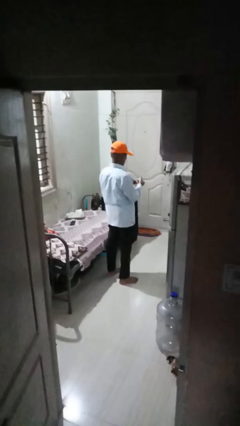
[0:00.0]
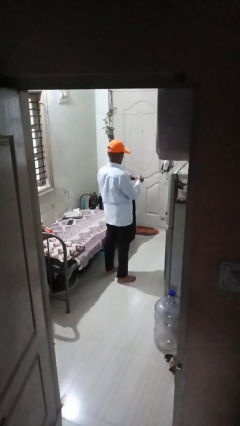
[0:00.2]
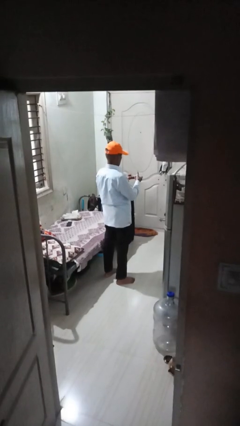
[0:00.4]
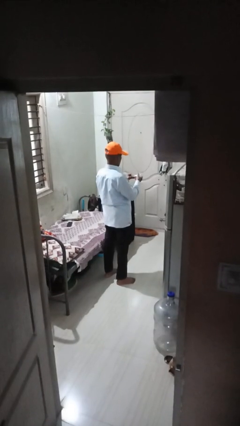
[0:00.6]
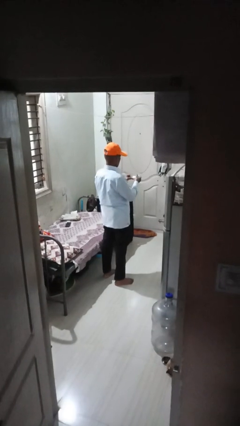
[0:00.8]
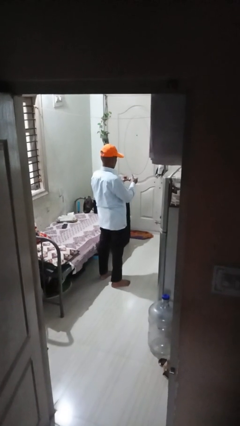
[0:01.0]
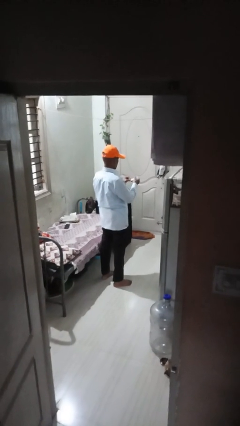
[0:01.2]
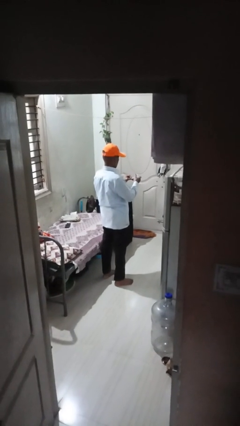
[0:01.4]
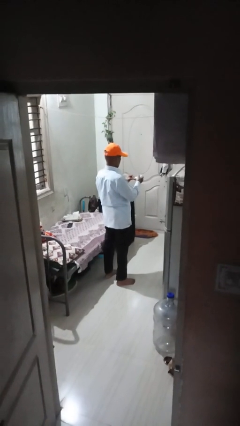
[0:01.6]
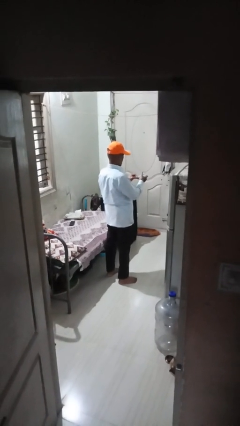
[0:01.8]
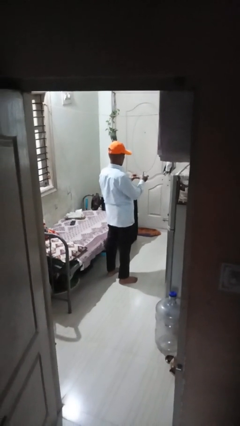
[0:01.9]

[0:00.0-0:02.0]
person clips fingernails

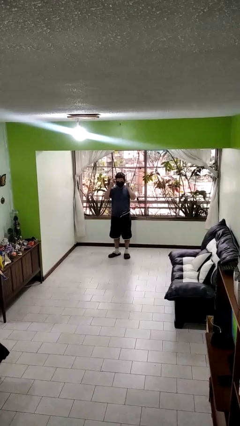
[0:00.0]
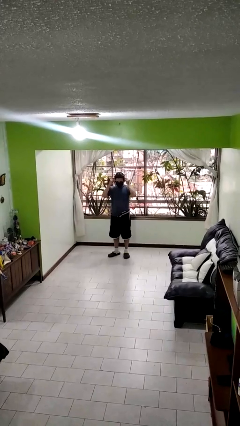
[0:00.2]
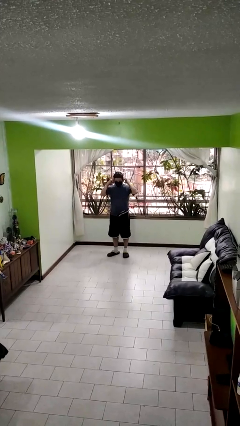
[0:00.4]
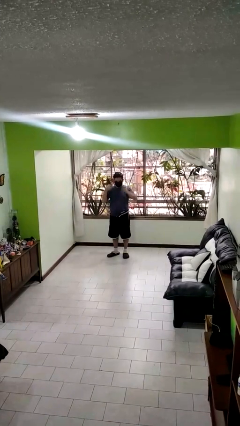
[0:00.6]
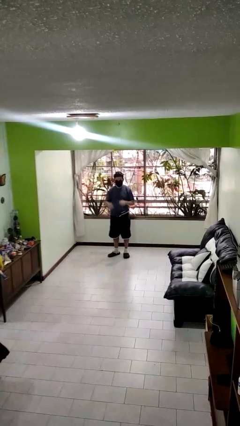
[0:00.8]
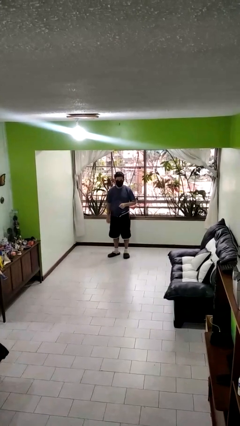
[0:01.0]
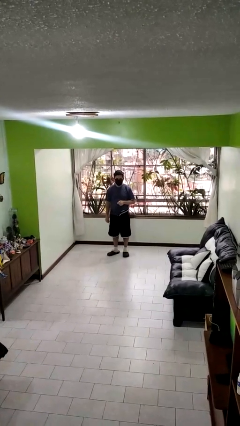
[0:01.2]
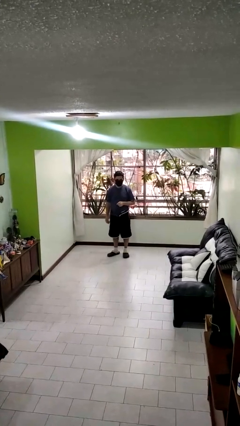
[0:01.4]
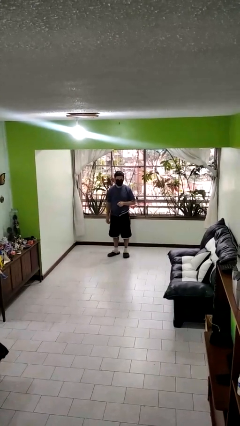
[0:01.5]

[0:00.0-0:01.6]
person puts on facemask

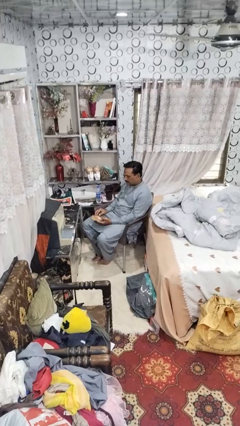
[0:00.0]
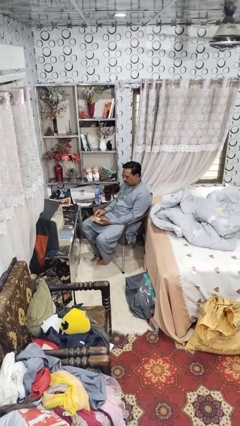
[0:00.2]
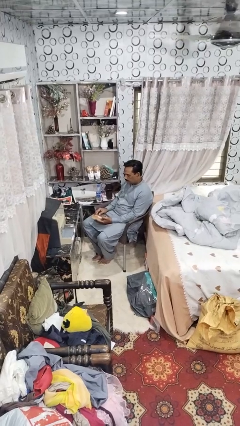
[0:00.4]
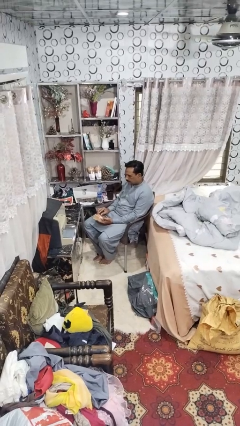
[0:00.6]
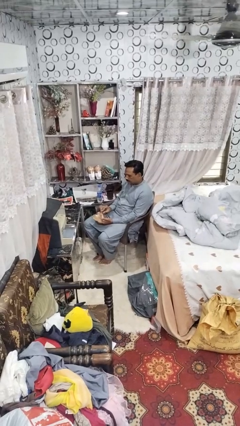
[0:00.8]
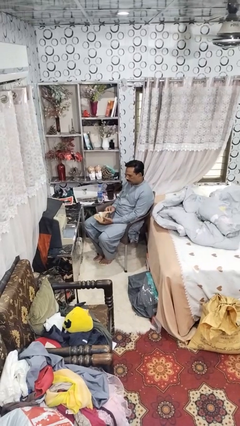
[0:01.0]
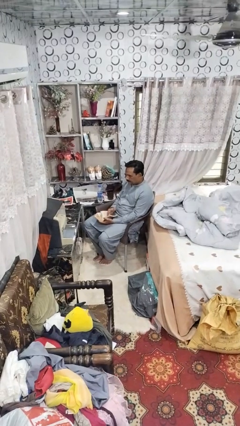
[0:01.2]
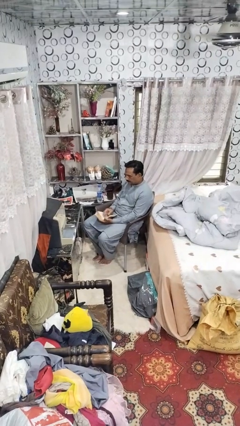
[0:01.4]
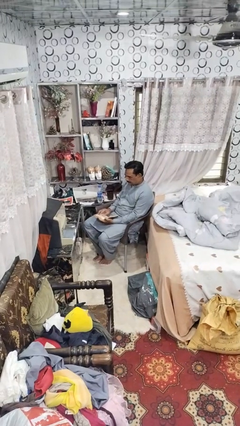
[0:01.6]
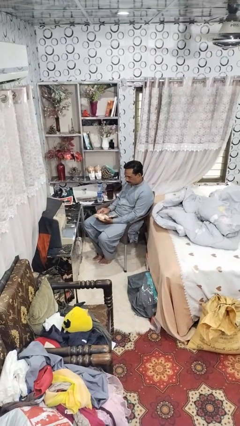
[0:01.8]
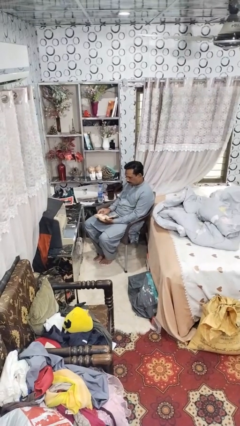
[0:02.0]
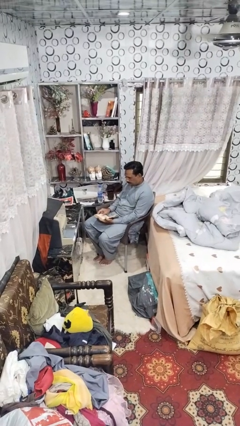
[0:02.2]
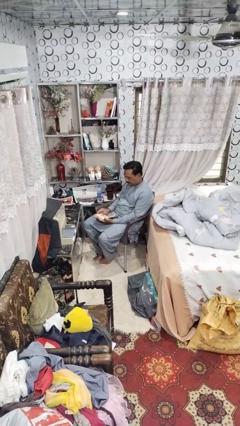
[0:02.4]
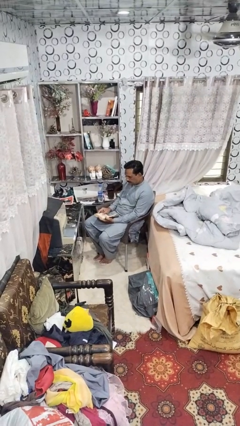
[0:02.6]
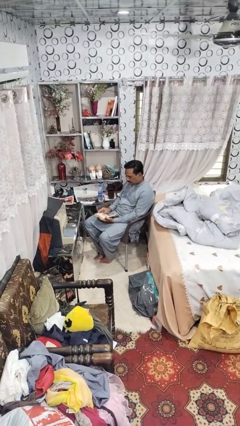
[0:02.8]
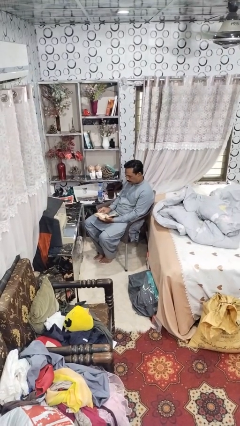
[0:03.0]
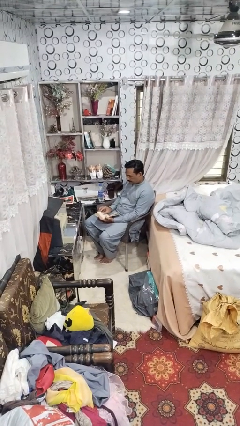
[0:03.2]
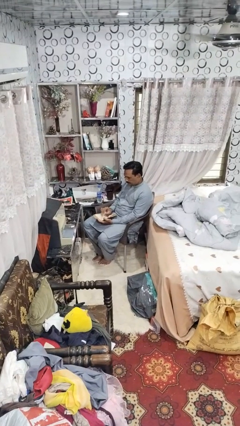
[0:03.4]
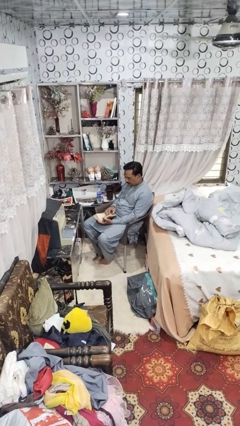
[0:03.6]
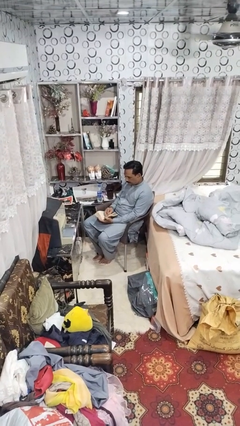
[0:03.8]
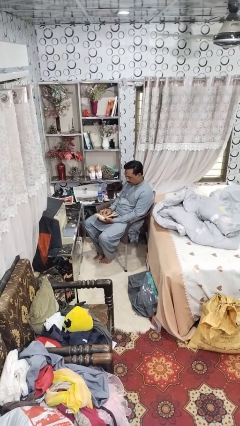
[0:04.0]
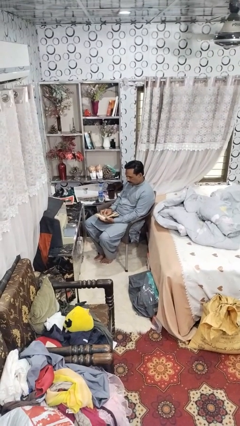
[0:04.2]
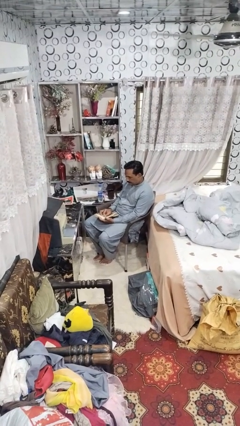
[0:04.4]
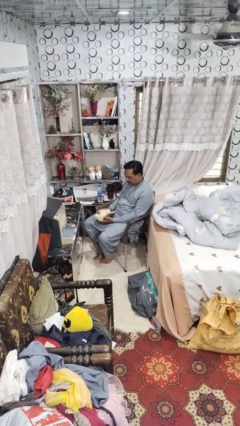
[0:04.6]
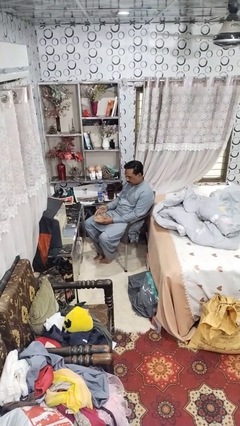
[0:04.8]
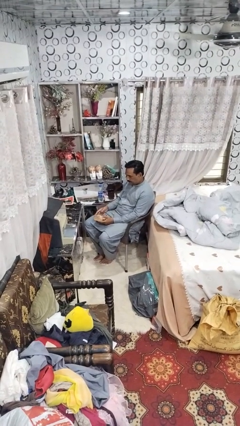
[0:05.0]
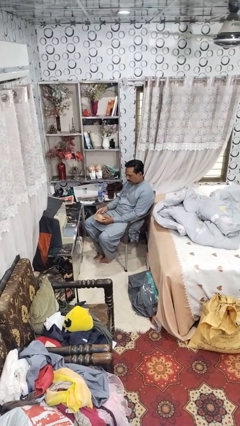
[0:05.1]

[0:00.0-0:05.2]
person reads book

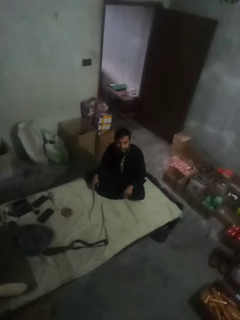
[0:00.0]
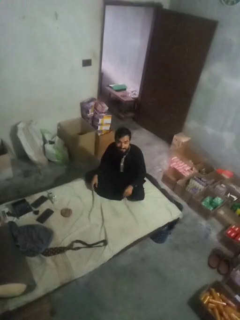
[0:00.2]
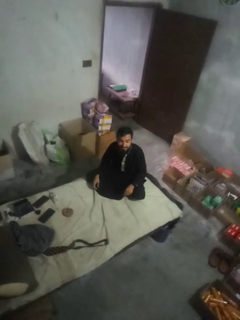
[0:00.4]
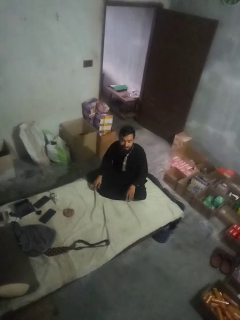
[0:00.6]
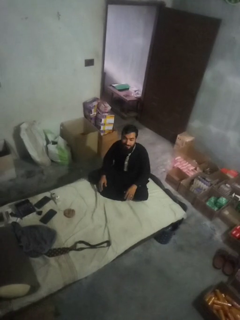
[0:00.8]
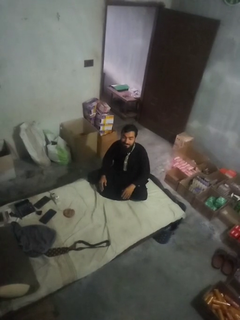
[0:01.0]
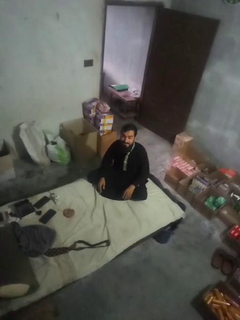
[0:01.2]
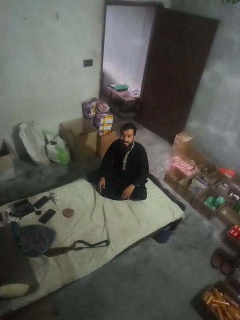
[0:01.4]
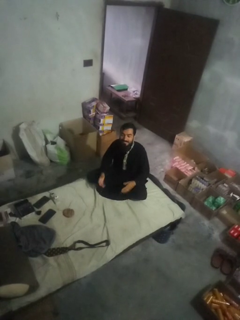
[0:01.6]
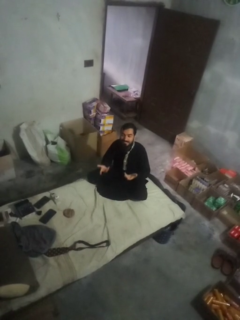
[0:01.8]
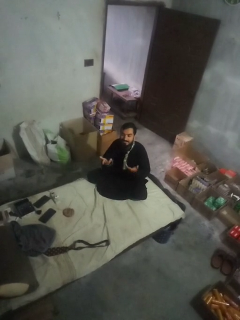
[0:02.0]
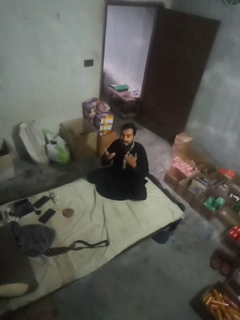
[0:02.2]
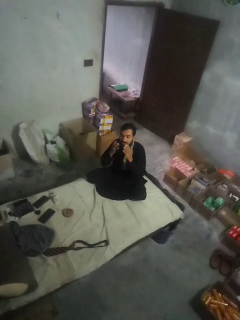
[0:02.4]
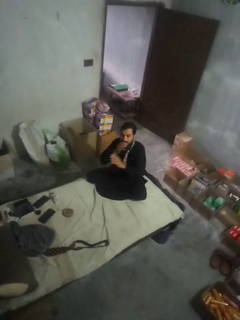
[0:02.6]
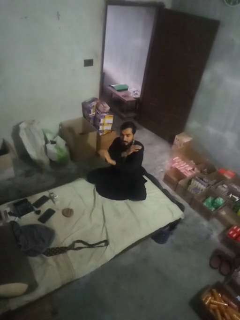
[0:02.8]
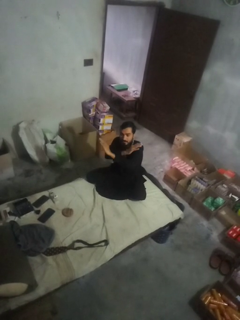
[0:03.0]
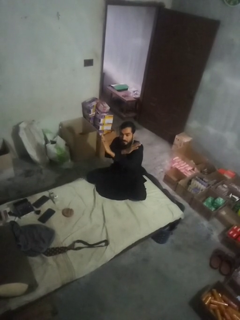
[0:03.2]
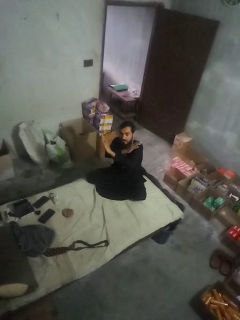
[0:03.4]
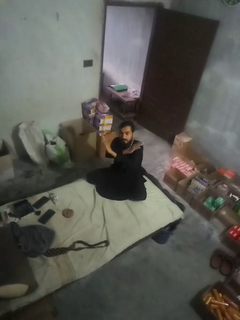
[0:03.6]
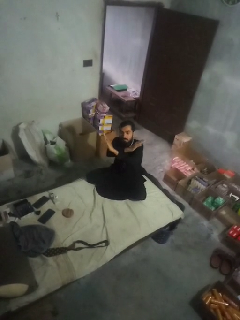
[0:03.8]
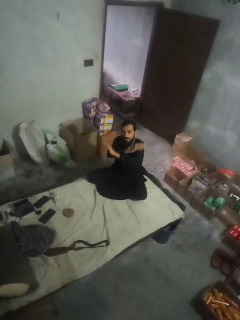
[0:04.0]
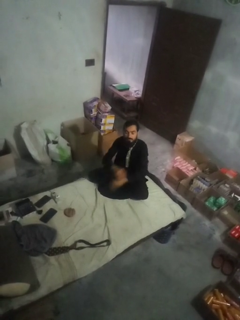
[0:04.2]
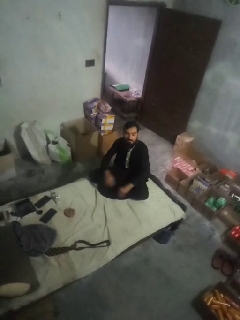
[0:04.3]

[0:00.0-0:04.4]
person gestures arms x

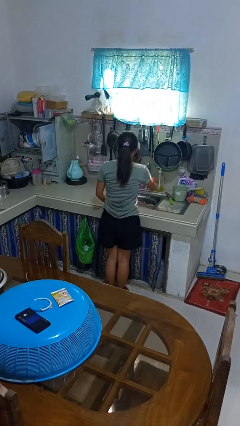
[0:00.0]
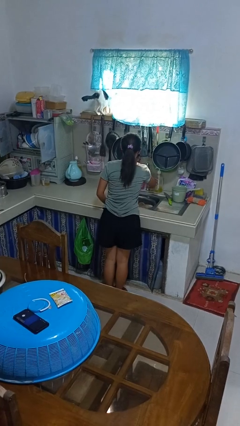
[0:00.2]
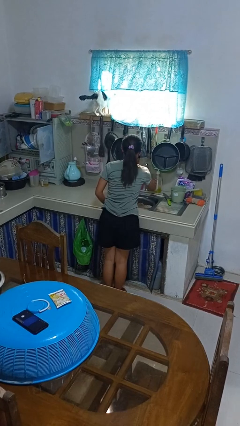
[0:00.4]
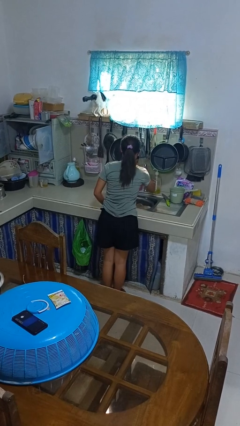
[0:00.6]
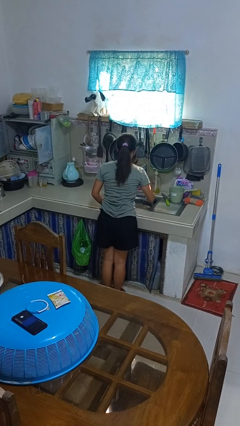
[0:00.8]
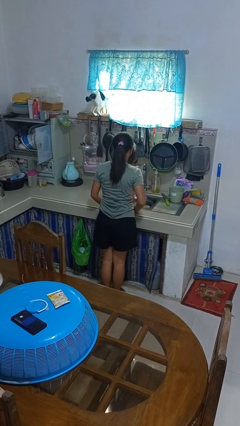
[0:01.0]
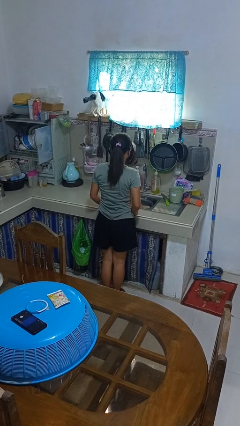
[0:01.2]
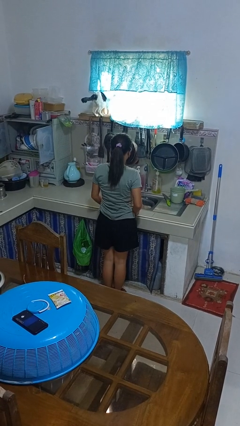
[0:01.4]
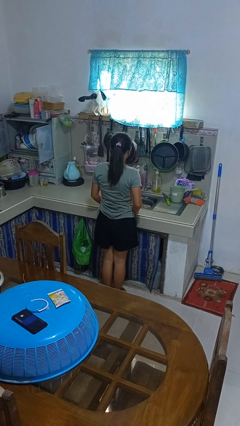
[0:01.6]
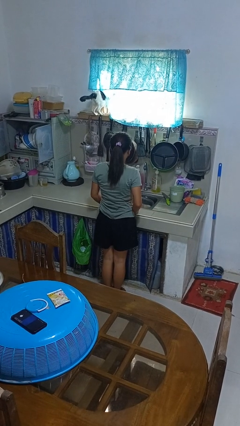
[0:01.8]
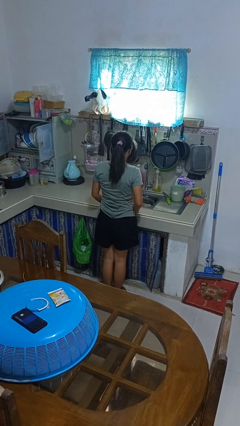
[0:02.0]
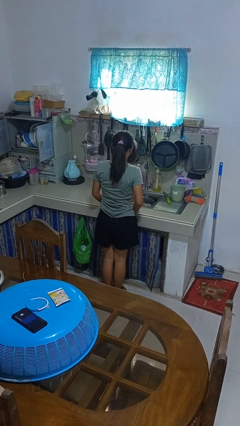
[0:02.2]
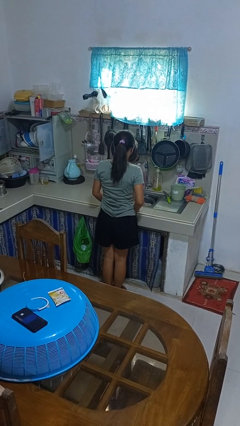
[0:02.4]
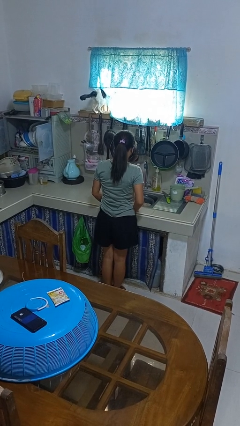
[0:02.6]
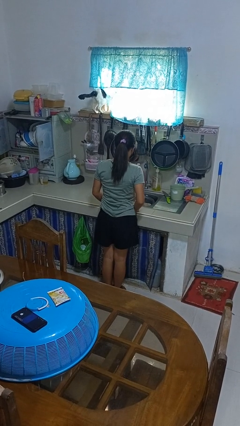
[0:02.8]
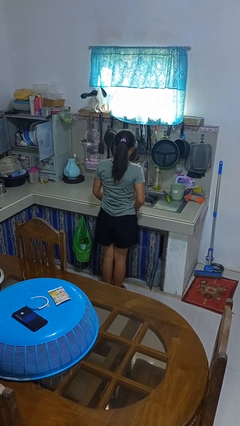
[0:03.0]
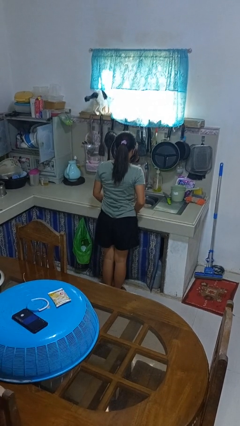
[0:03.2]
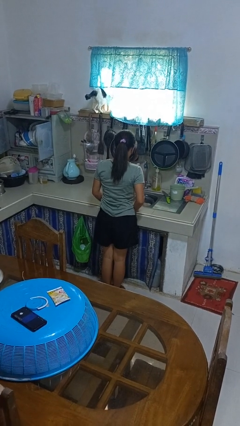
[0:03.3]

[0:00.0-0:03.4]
person turns on faucet

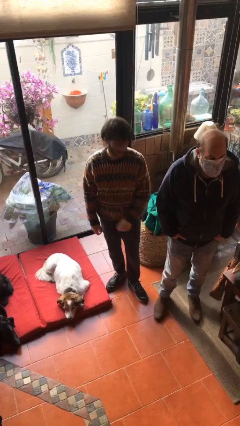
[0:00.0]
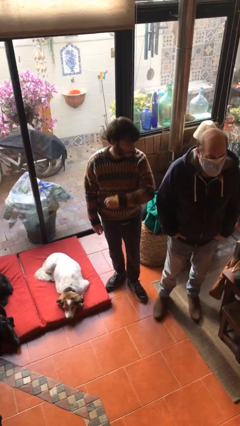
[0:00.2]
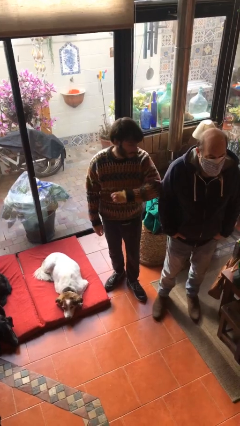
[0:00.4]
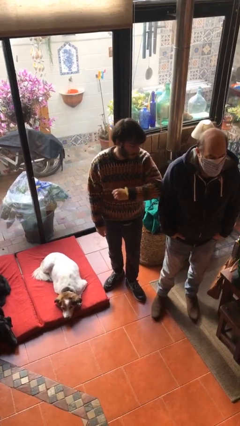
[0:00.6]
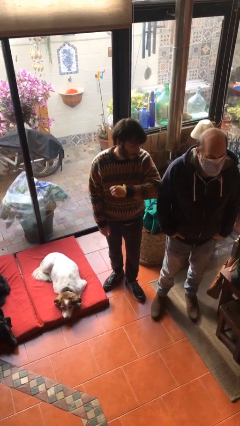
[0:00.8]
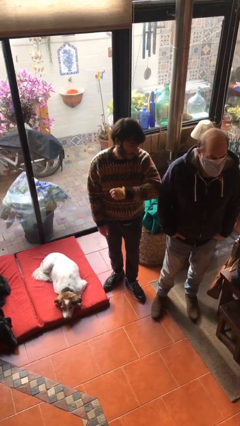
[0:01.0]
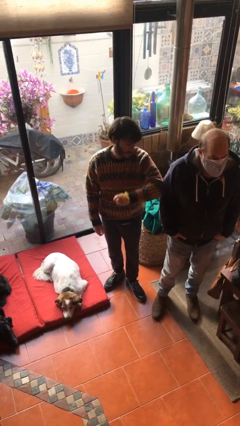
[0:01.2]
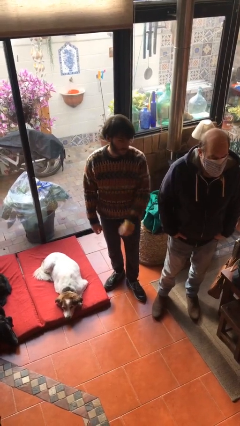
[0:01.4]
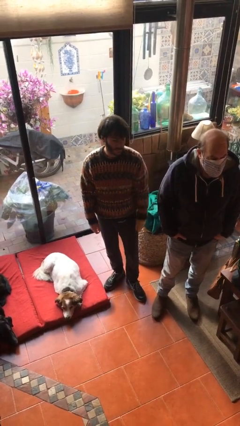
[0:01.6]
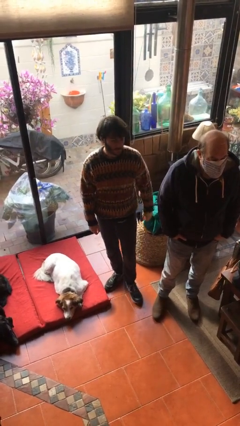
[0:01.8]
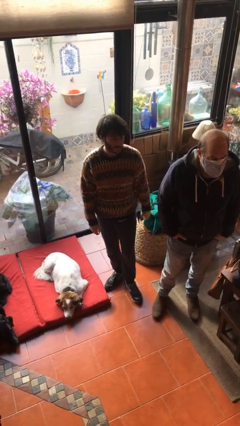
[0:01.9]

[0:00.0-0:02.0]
person nudges person with elbow
